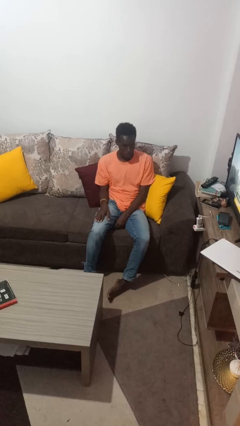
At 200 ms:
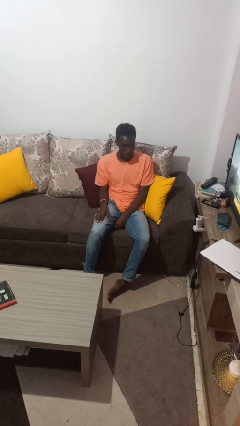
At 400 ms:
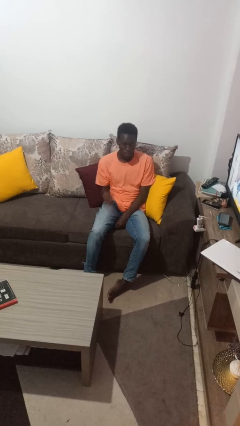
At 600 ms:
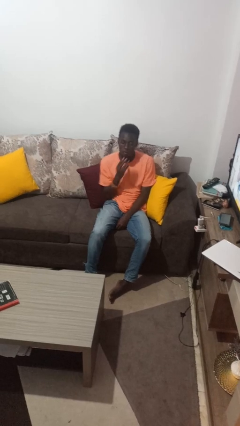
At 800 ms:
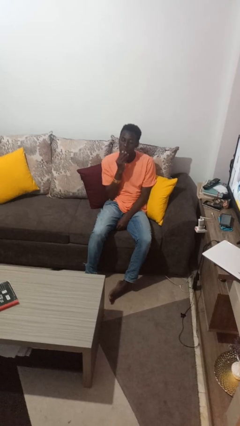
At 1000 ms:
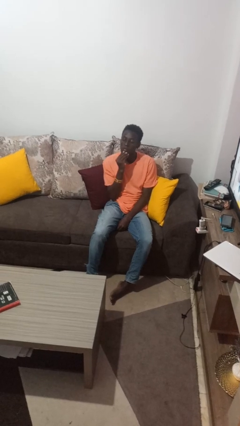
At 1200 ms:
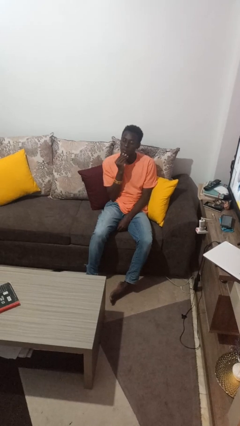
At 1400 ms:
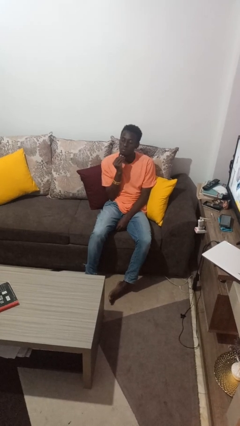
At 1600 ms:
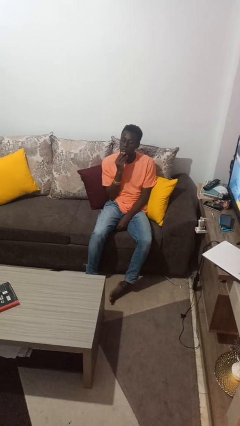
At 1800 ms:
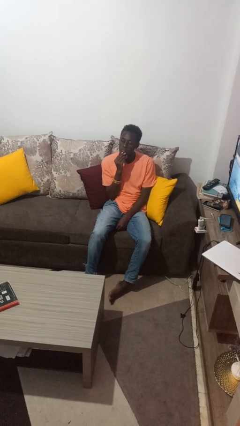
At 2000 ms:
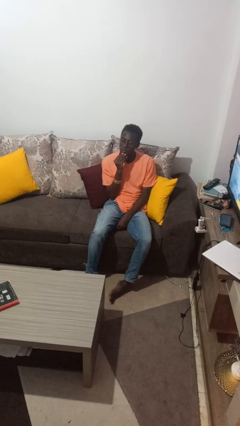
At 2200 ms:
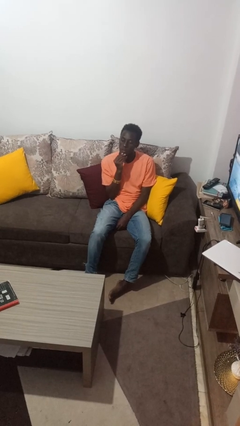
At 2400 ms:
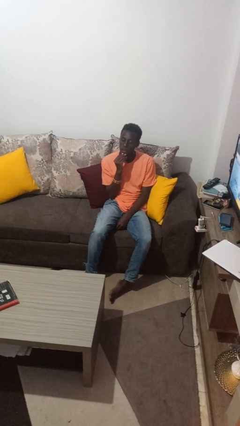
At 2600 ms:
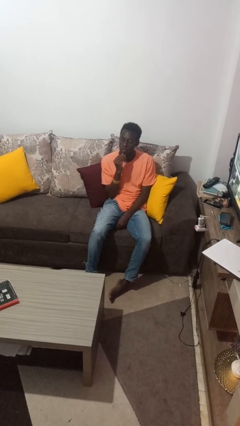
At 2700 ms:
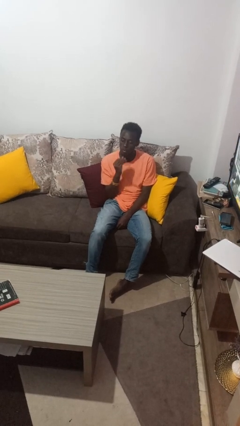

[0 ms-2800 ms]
person strokes chin

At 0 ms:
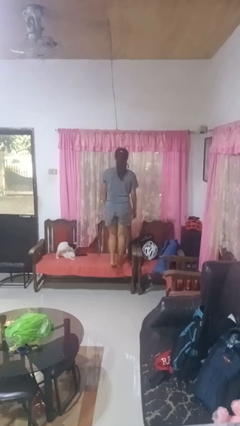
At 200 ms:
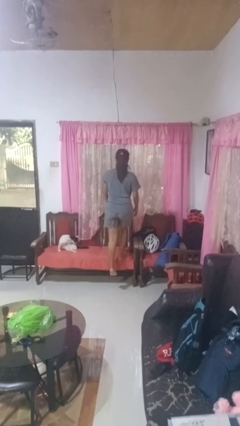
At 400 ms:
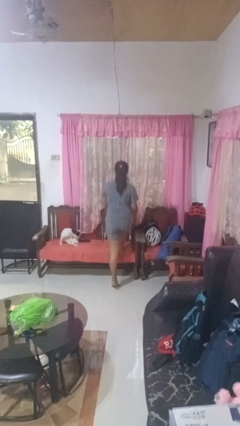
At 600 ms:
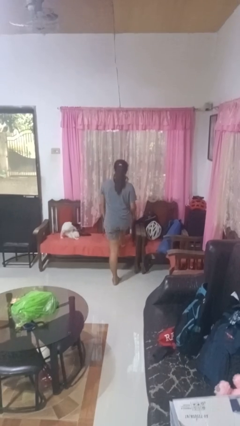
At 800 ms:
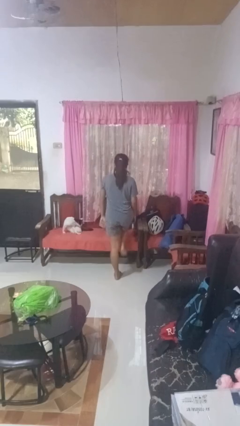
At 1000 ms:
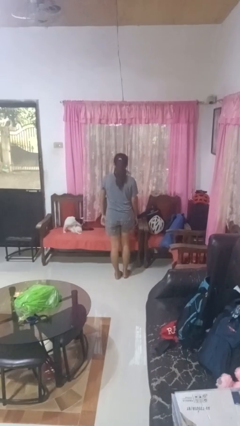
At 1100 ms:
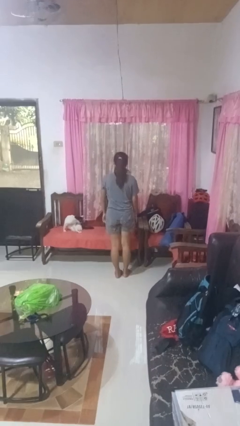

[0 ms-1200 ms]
person climbs off chair

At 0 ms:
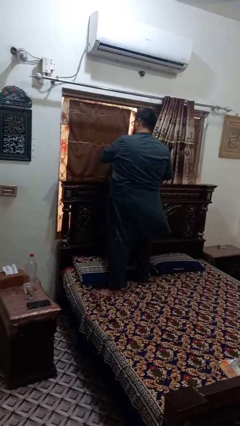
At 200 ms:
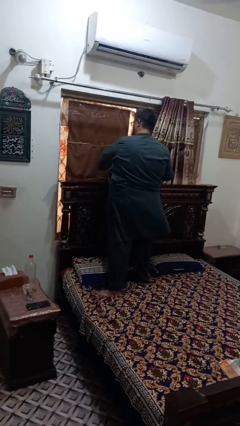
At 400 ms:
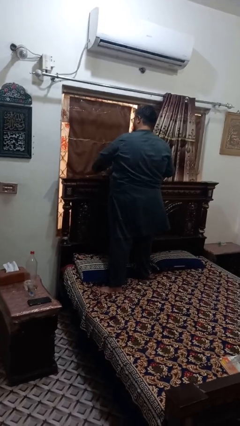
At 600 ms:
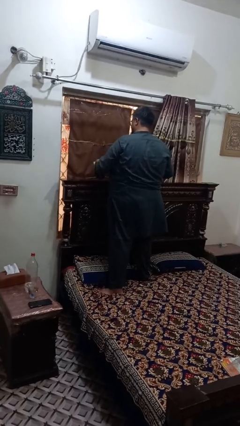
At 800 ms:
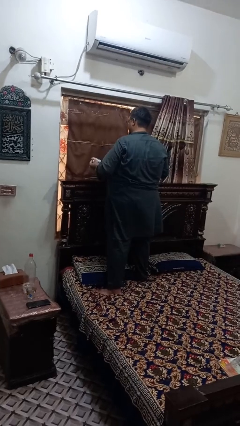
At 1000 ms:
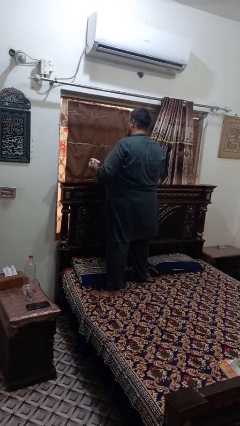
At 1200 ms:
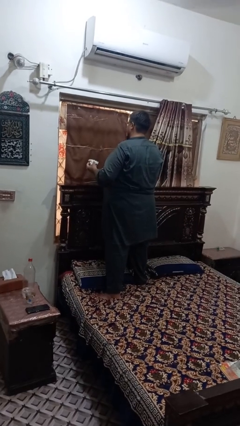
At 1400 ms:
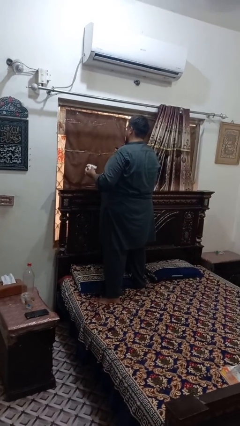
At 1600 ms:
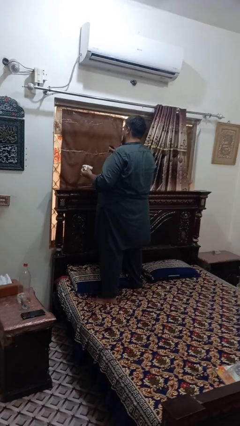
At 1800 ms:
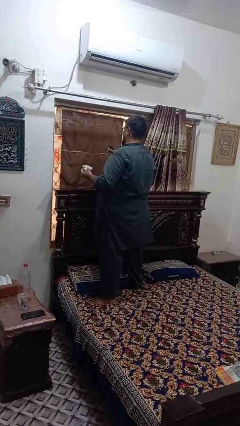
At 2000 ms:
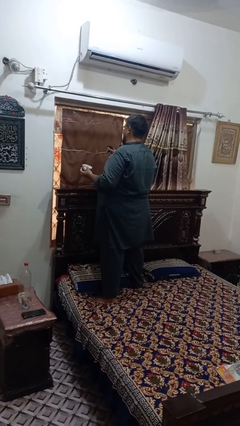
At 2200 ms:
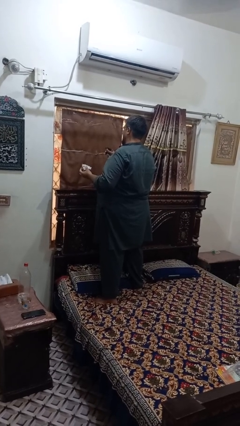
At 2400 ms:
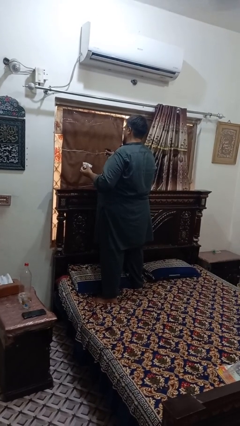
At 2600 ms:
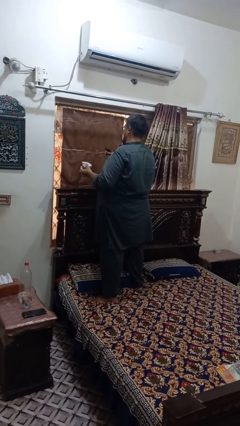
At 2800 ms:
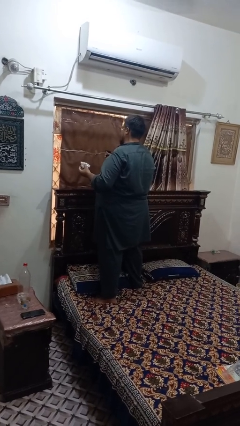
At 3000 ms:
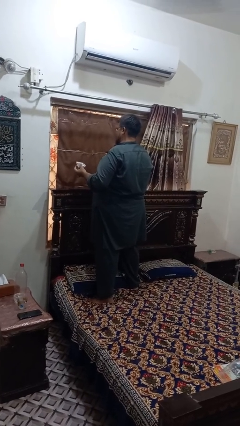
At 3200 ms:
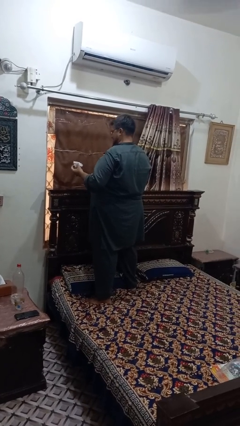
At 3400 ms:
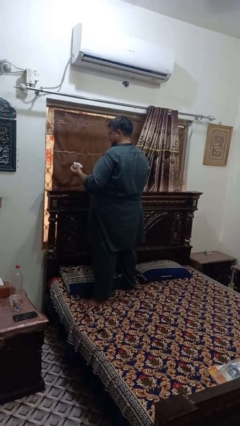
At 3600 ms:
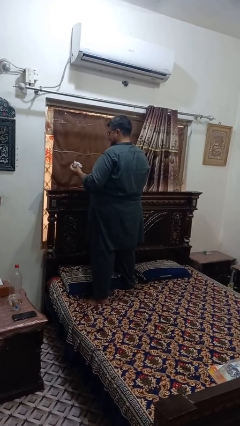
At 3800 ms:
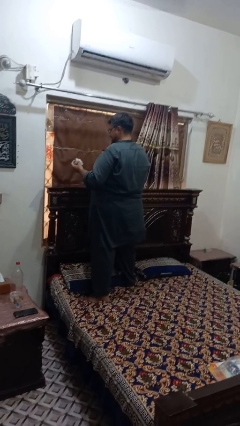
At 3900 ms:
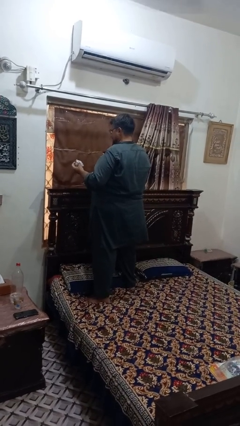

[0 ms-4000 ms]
person sprays from bottle

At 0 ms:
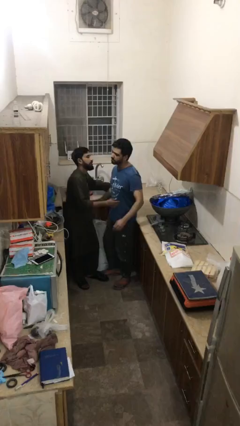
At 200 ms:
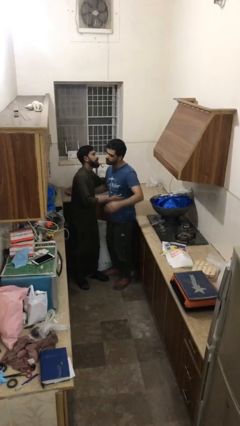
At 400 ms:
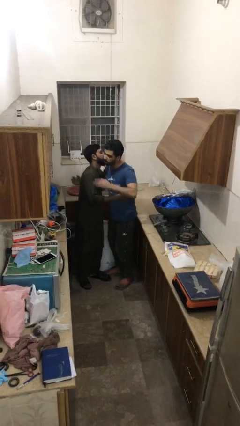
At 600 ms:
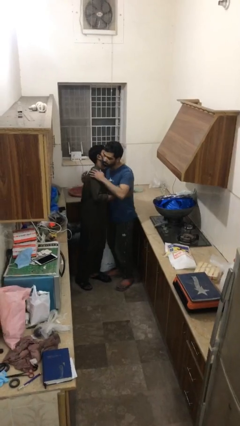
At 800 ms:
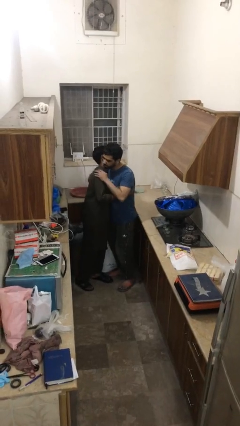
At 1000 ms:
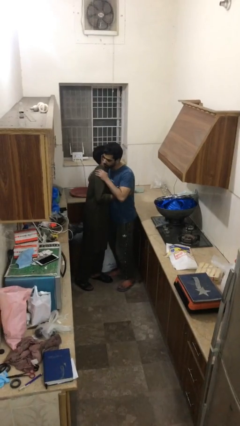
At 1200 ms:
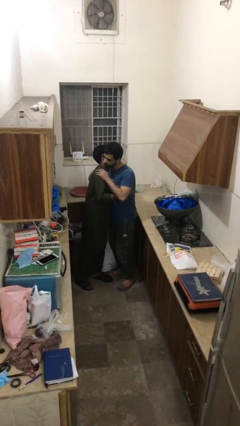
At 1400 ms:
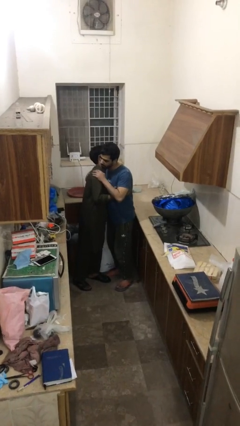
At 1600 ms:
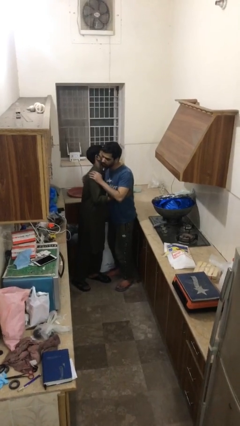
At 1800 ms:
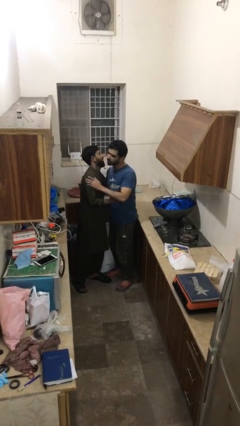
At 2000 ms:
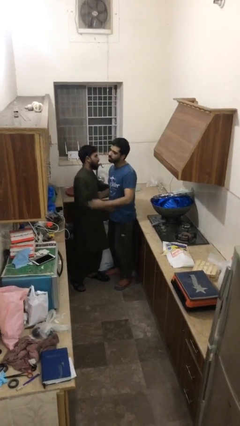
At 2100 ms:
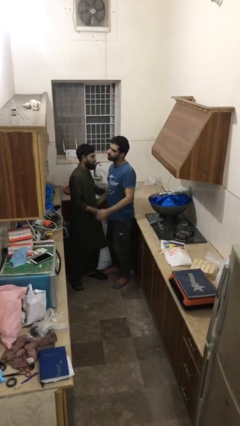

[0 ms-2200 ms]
person embraces person

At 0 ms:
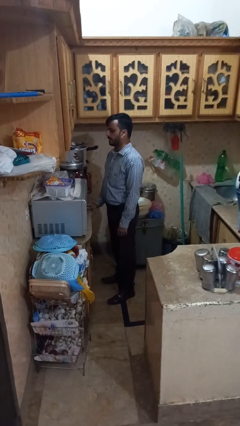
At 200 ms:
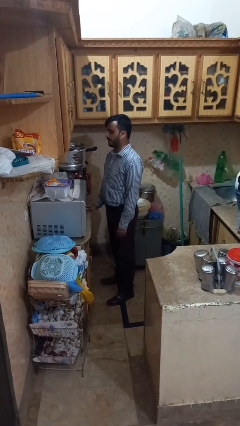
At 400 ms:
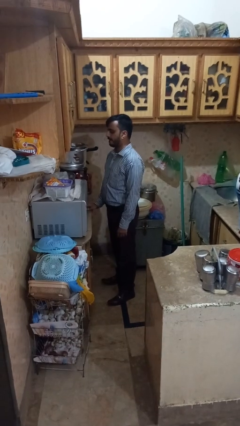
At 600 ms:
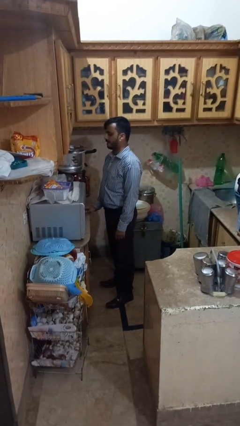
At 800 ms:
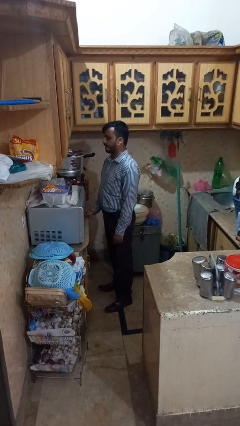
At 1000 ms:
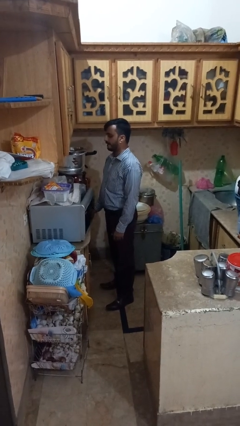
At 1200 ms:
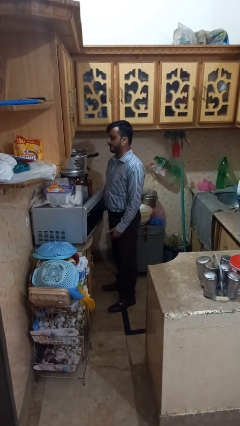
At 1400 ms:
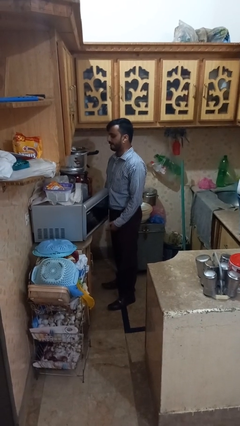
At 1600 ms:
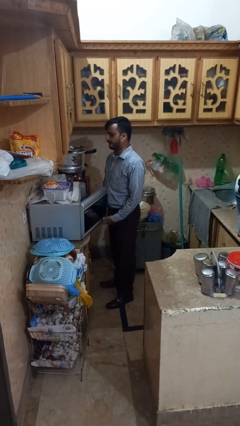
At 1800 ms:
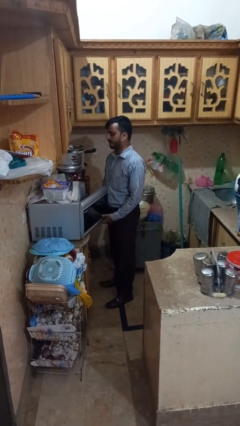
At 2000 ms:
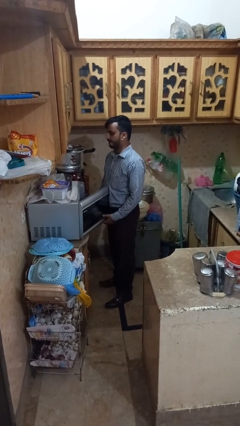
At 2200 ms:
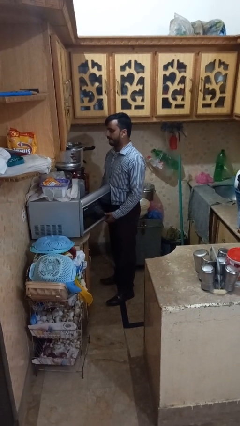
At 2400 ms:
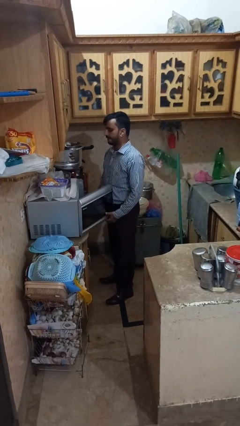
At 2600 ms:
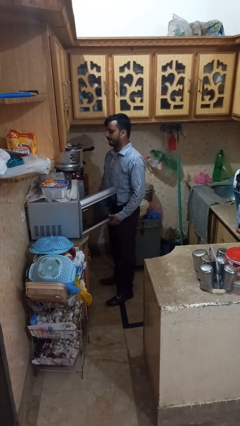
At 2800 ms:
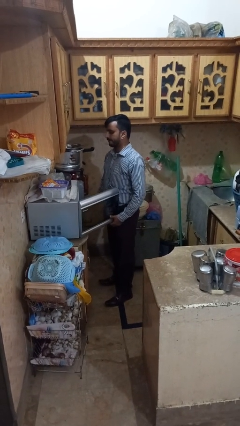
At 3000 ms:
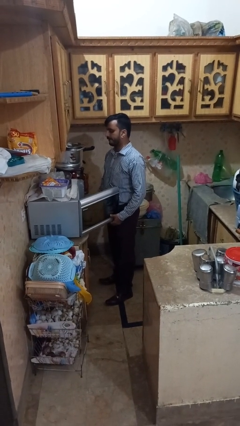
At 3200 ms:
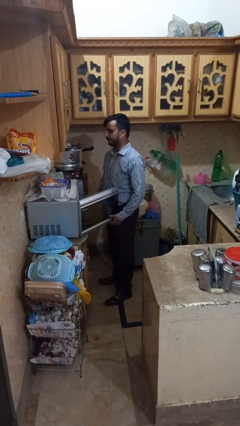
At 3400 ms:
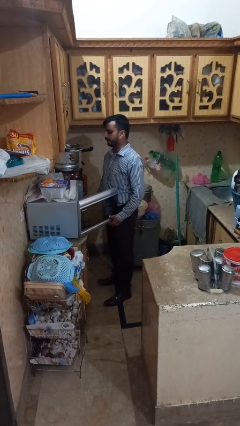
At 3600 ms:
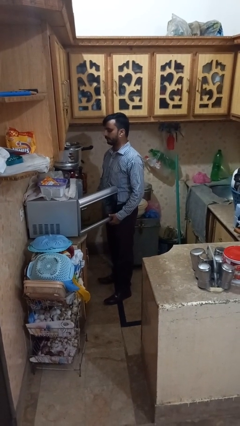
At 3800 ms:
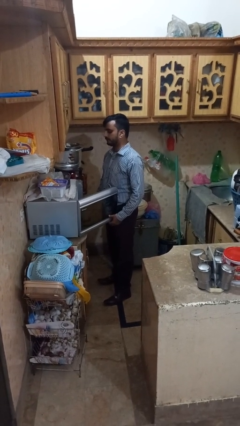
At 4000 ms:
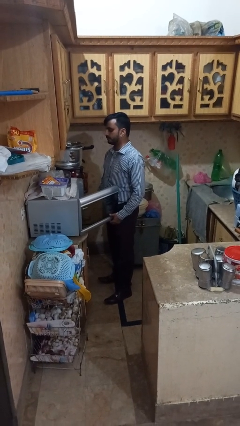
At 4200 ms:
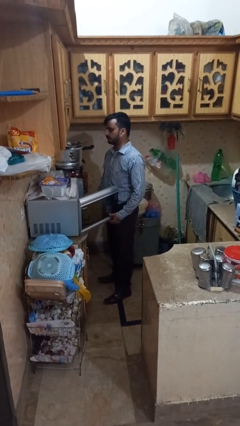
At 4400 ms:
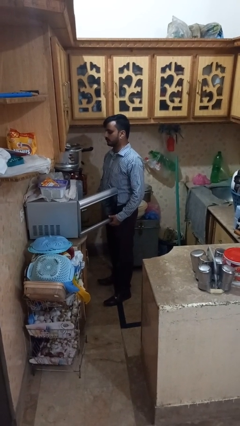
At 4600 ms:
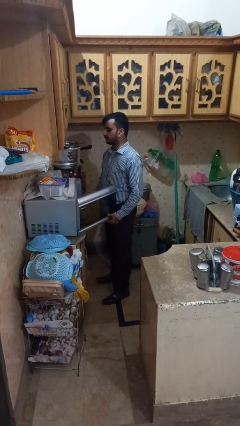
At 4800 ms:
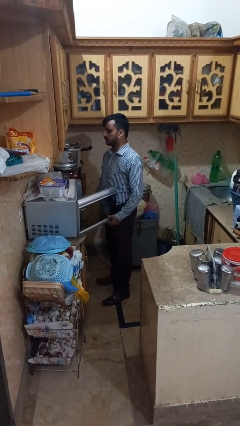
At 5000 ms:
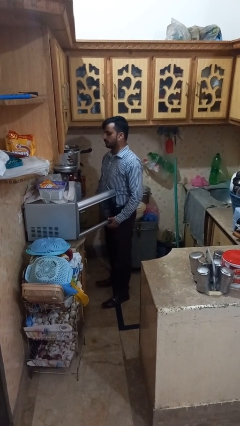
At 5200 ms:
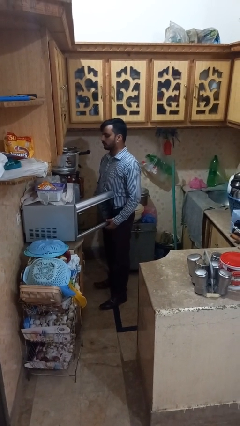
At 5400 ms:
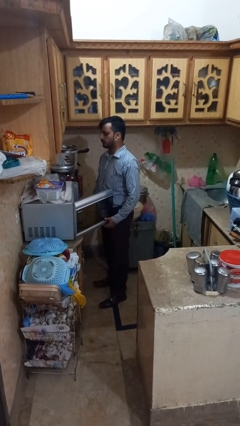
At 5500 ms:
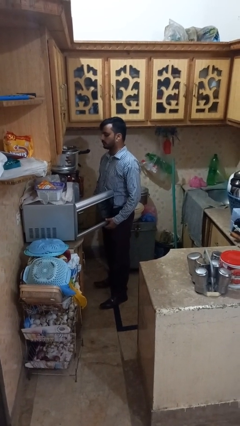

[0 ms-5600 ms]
person opens microwave

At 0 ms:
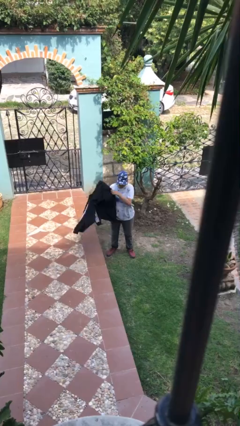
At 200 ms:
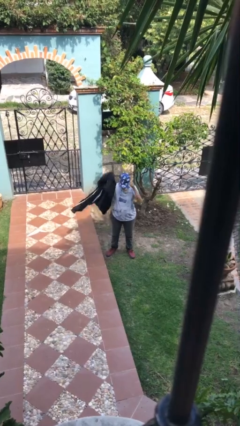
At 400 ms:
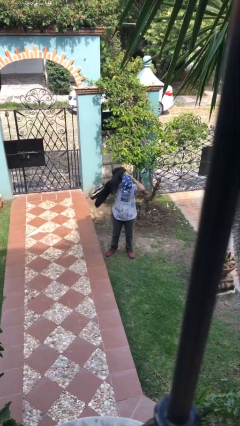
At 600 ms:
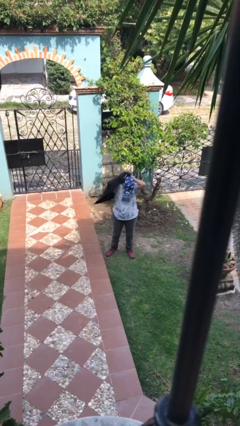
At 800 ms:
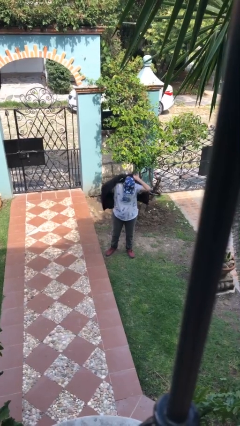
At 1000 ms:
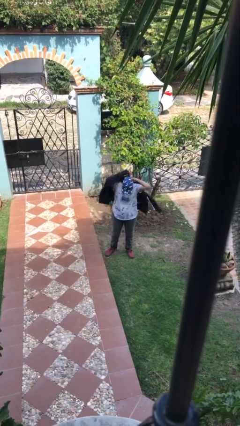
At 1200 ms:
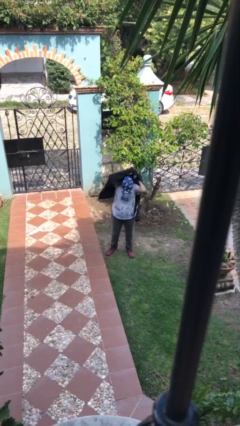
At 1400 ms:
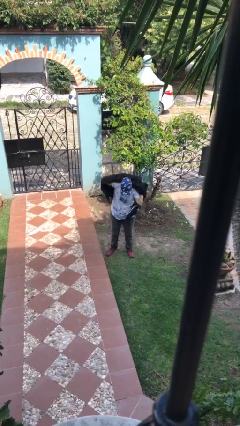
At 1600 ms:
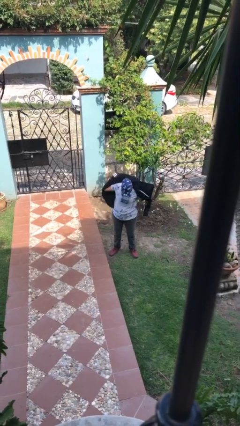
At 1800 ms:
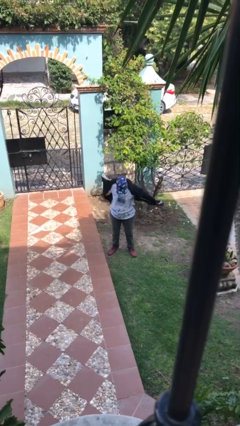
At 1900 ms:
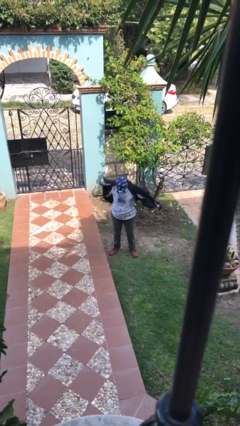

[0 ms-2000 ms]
person puts on jacket
